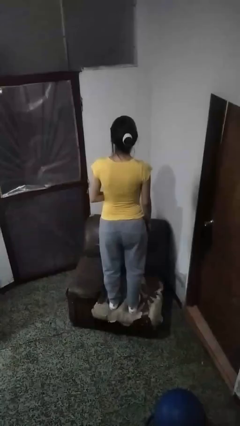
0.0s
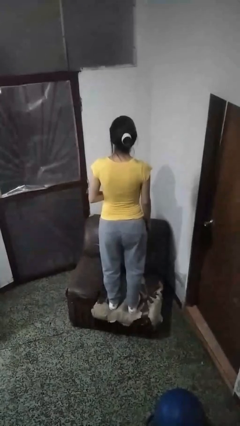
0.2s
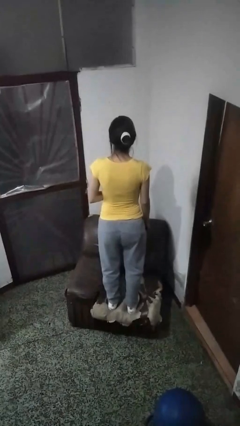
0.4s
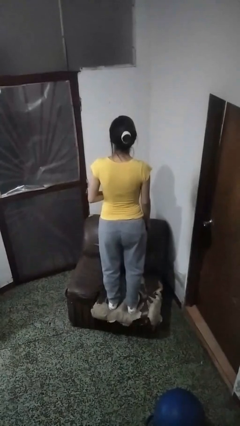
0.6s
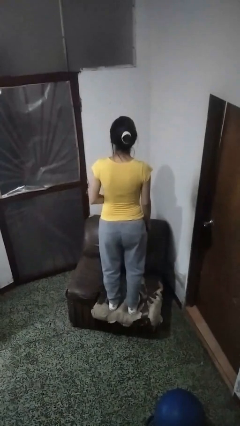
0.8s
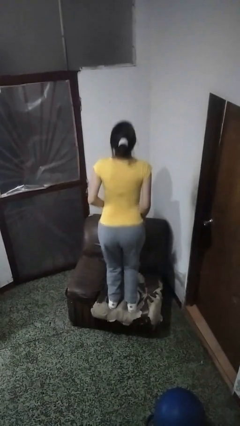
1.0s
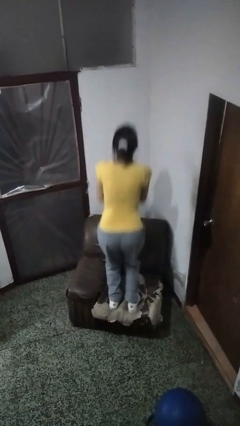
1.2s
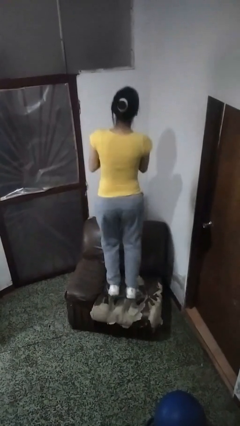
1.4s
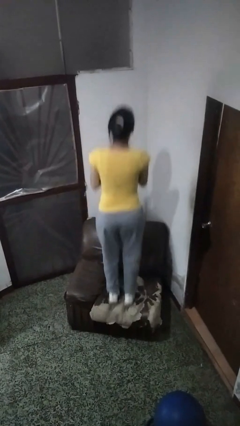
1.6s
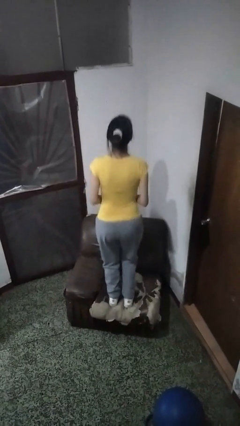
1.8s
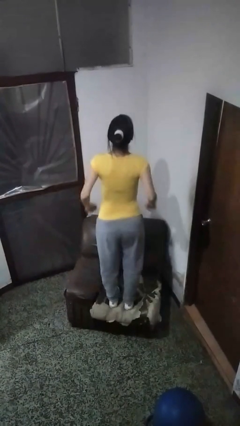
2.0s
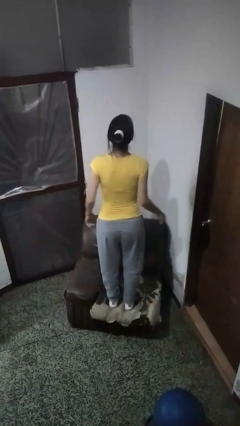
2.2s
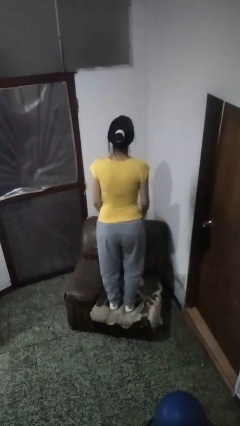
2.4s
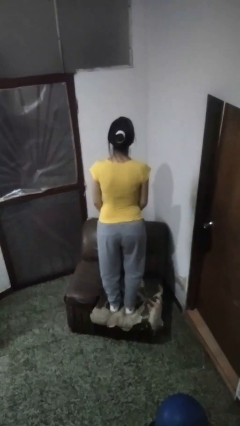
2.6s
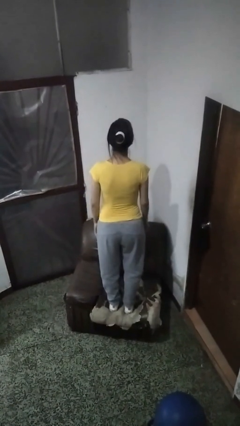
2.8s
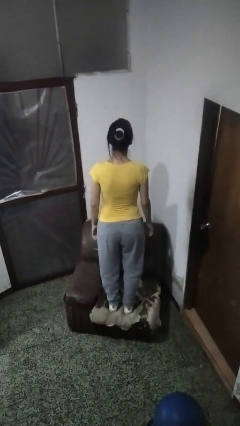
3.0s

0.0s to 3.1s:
person jumps on couch

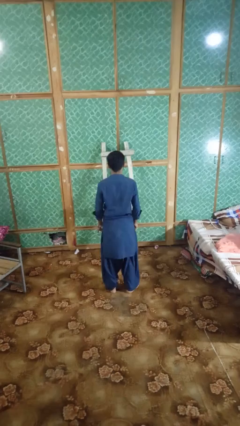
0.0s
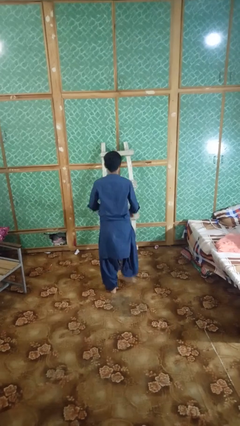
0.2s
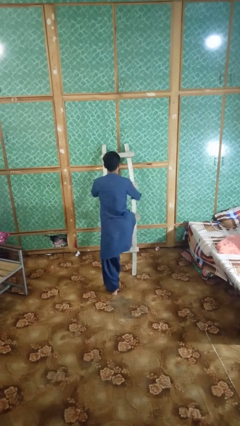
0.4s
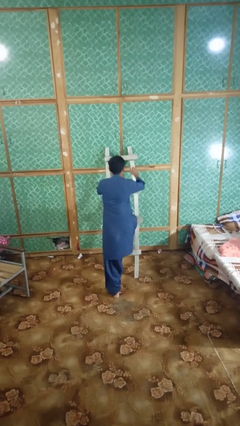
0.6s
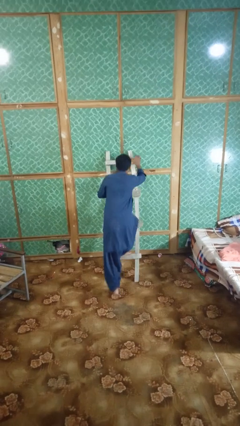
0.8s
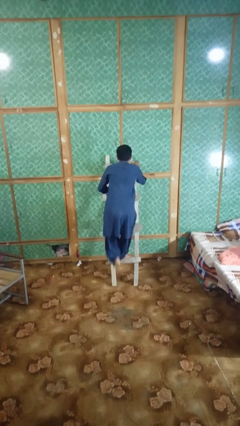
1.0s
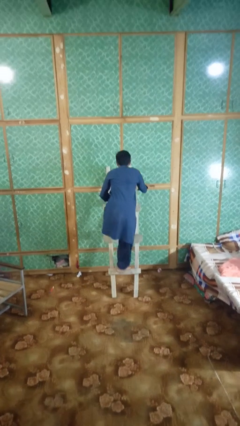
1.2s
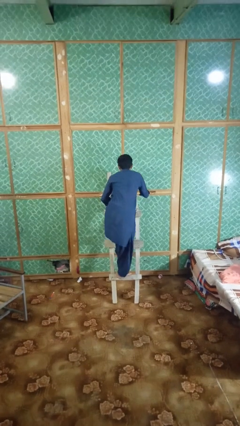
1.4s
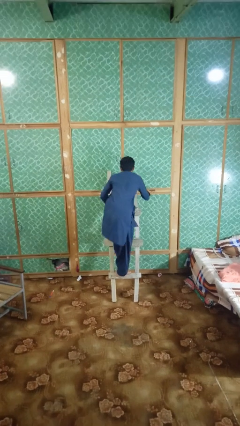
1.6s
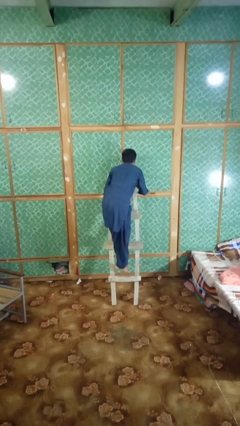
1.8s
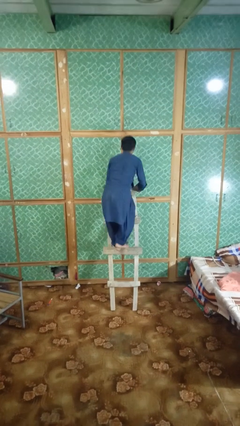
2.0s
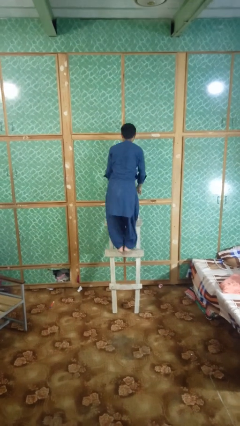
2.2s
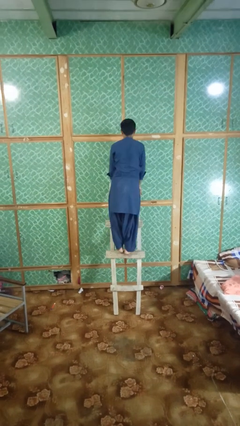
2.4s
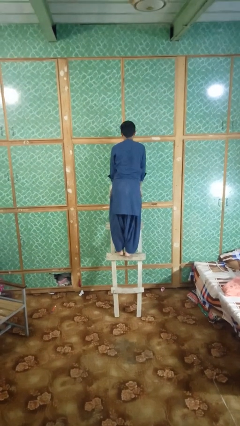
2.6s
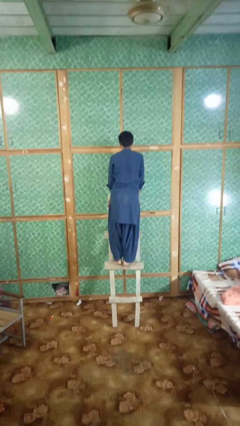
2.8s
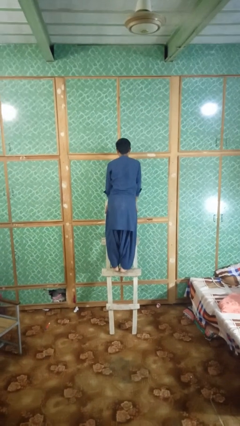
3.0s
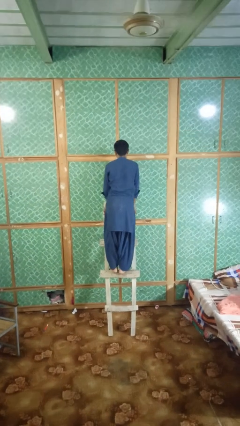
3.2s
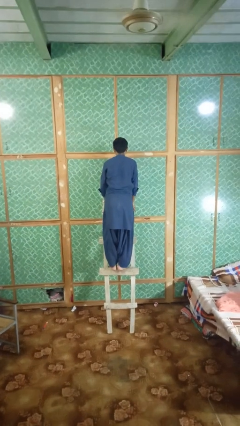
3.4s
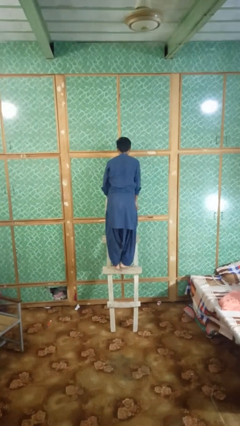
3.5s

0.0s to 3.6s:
person climbs up ladder

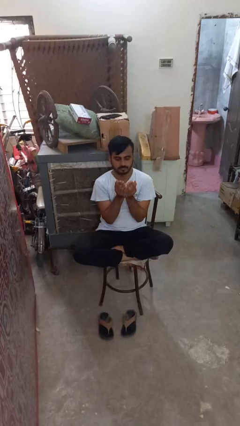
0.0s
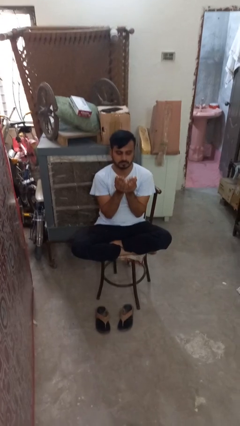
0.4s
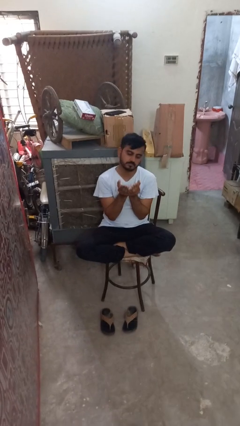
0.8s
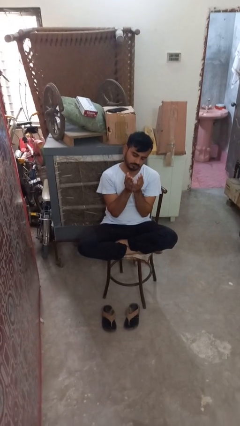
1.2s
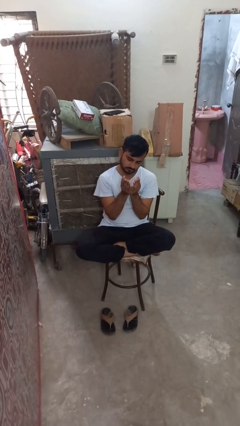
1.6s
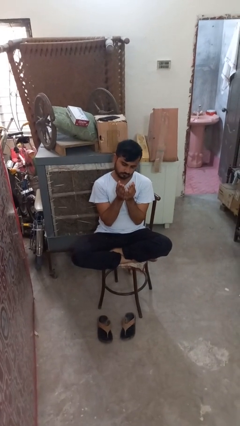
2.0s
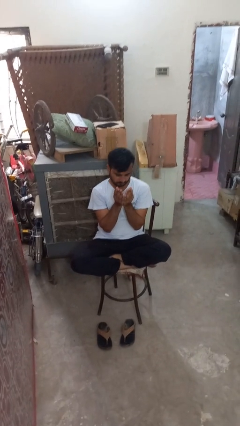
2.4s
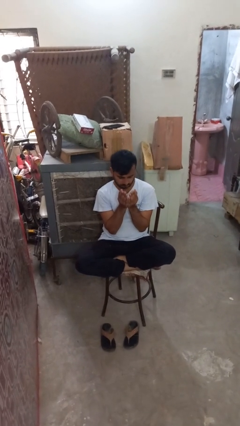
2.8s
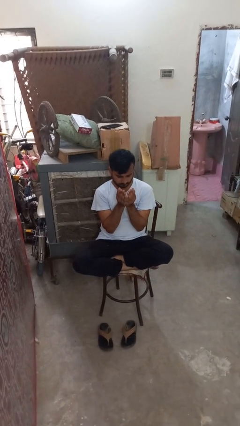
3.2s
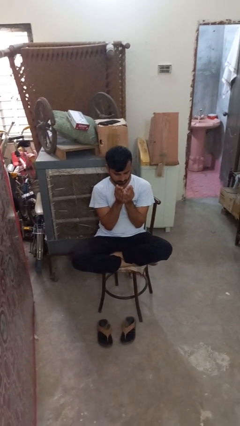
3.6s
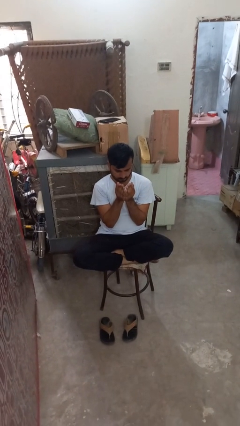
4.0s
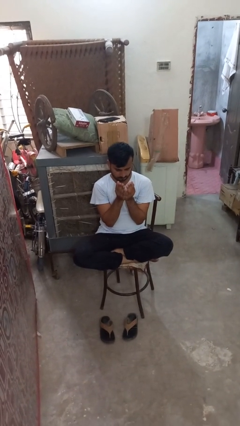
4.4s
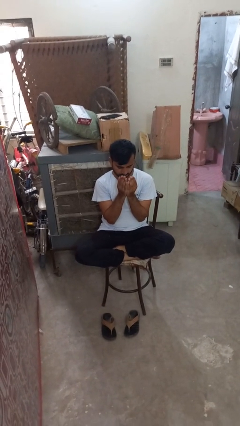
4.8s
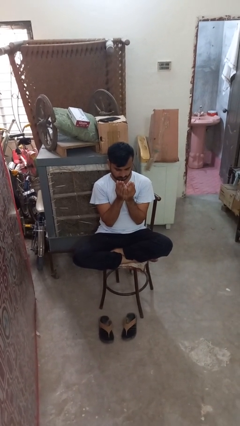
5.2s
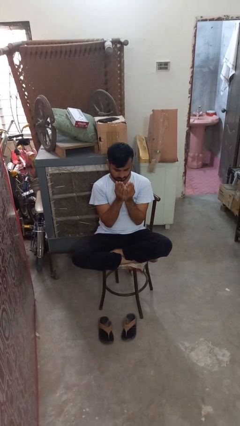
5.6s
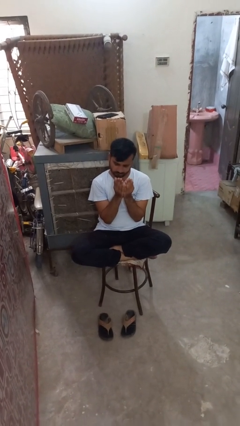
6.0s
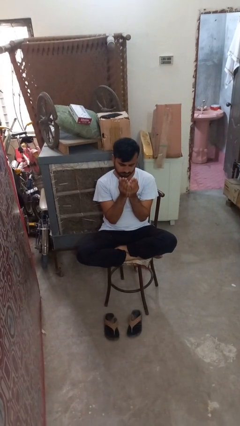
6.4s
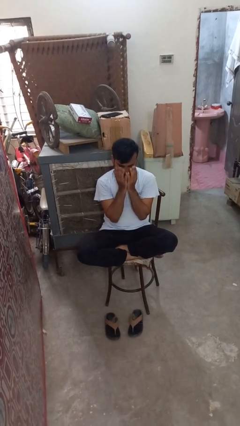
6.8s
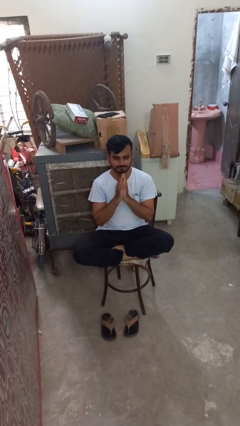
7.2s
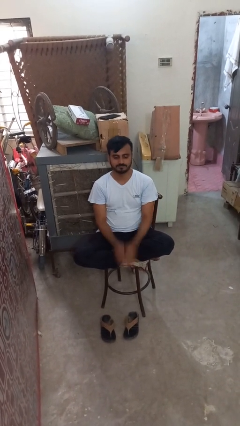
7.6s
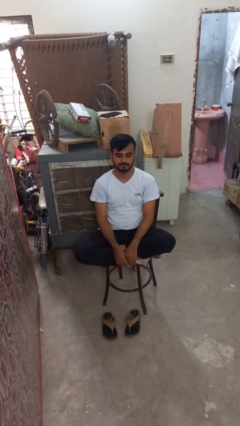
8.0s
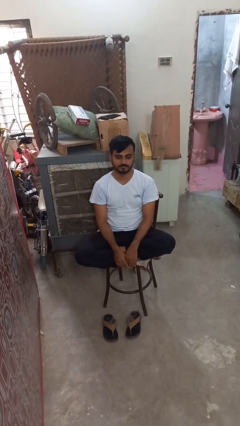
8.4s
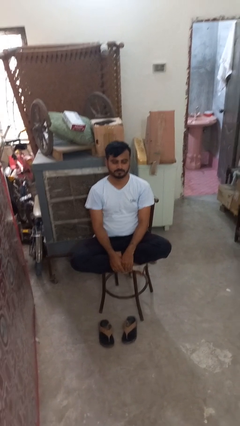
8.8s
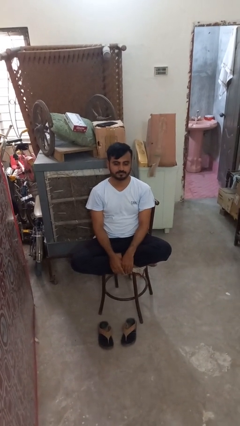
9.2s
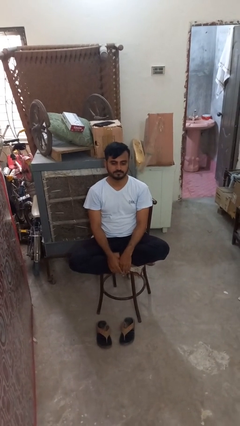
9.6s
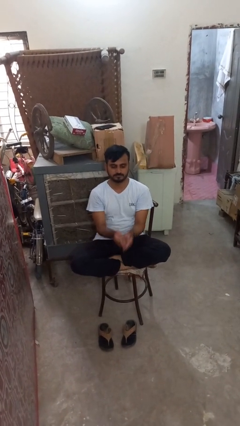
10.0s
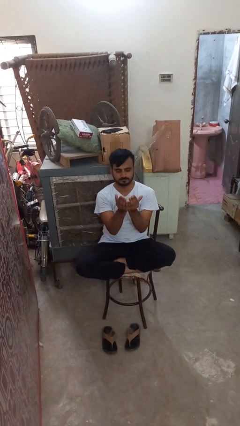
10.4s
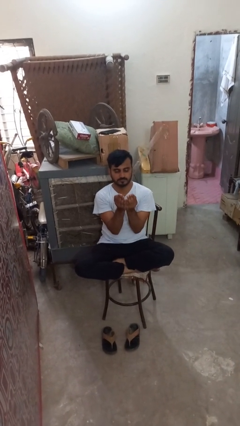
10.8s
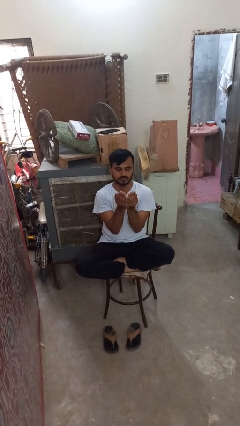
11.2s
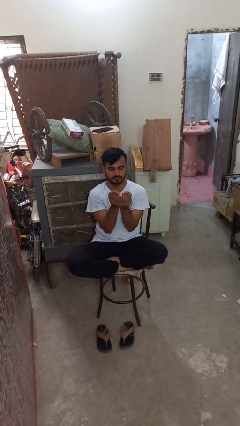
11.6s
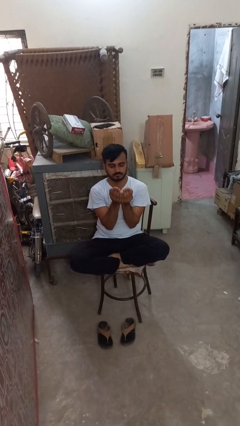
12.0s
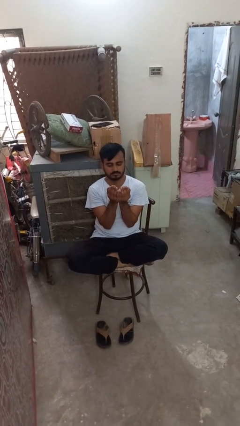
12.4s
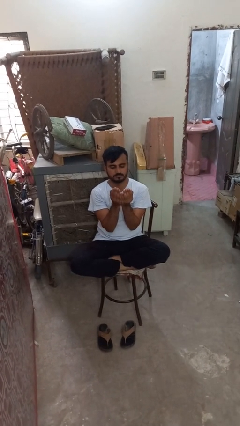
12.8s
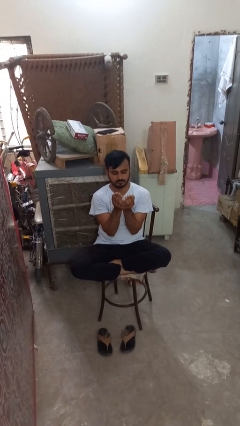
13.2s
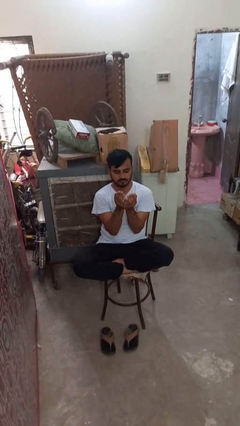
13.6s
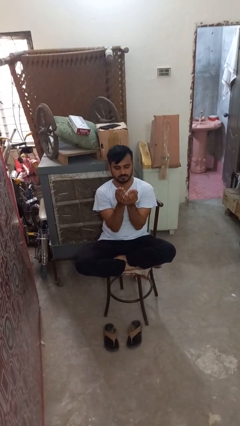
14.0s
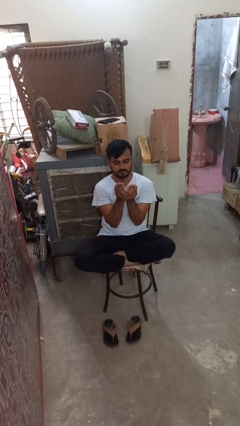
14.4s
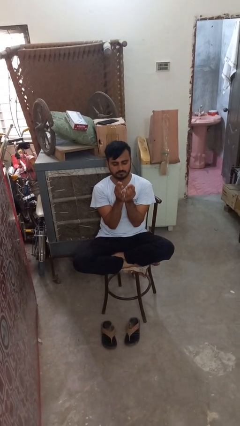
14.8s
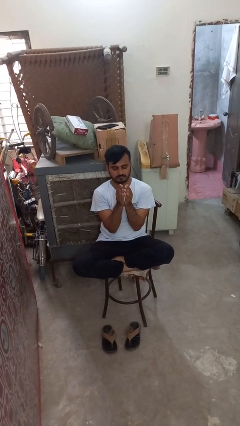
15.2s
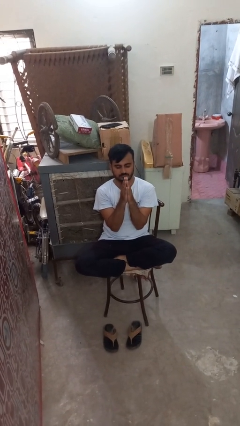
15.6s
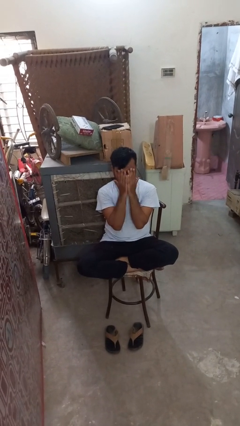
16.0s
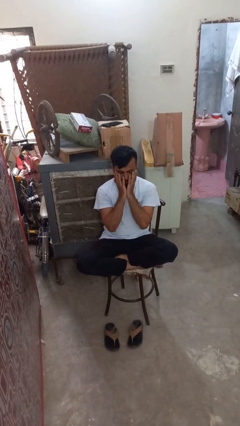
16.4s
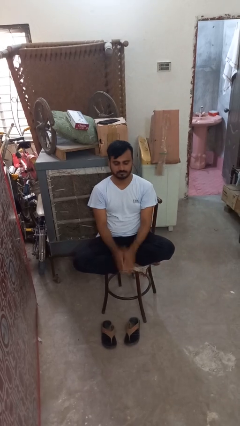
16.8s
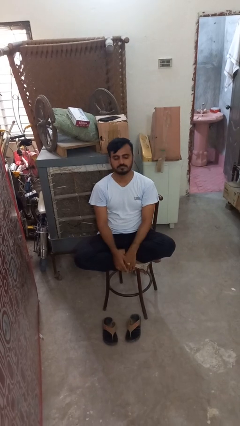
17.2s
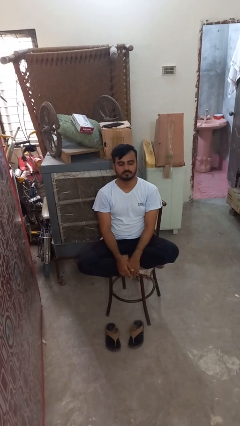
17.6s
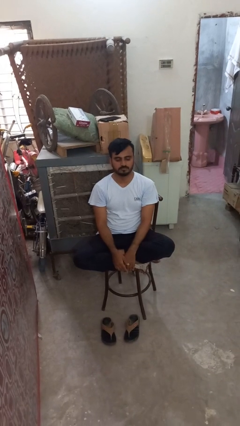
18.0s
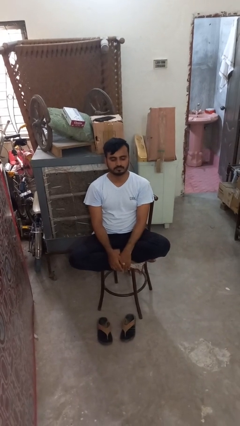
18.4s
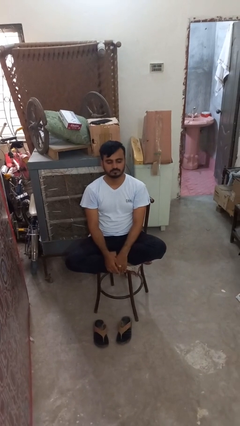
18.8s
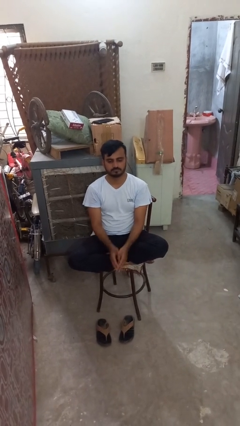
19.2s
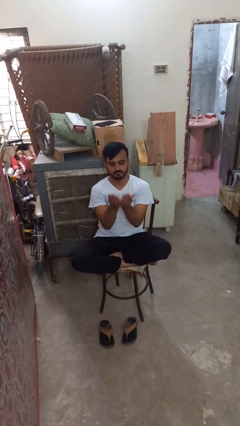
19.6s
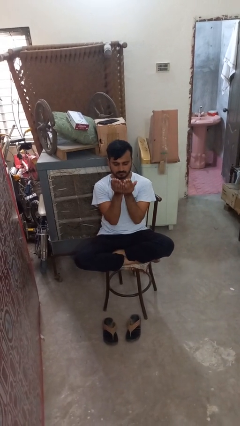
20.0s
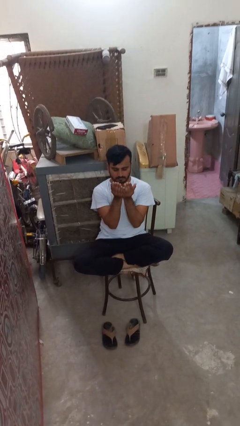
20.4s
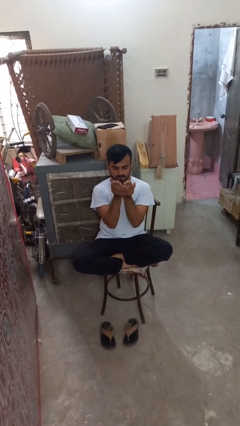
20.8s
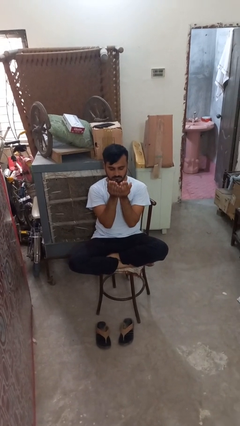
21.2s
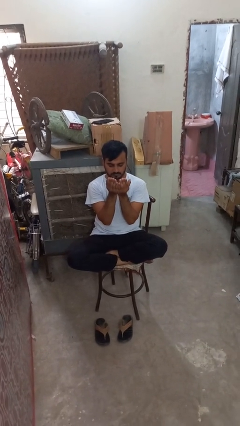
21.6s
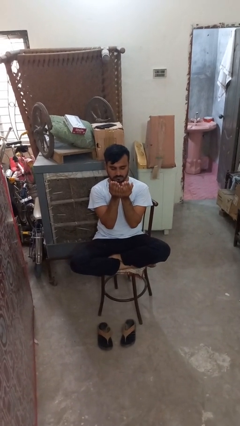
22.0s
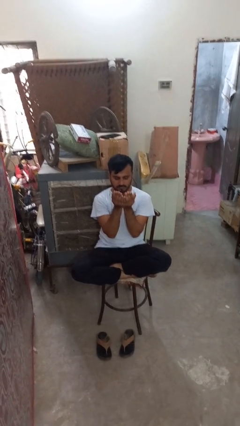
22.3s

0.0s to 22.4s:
person prays

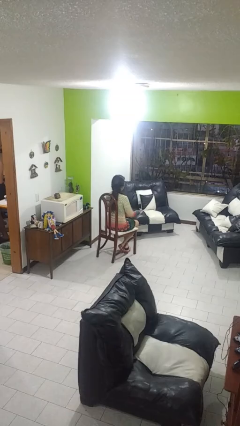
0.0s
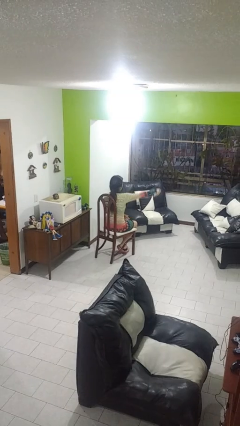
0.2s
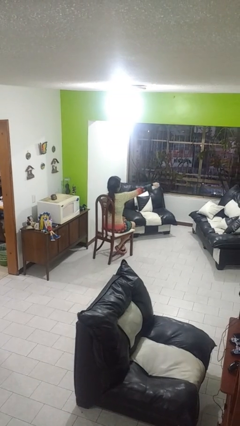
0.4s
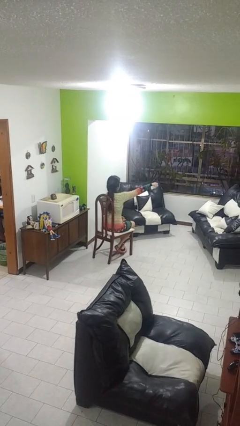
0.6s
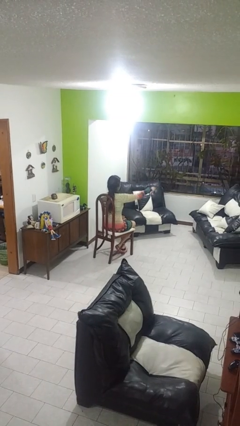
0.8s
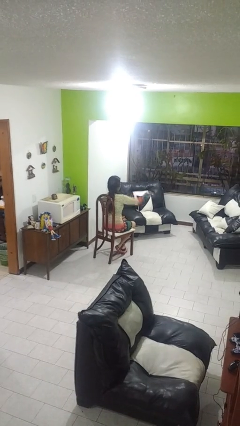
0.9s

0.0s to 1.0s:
person uses television remote
